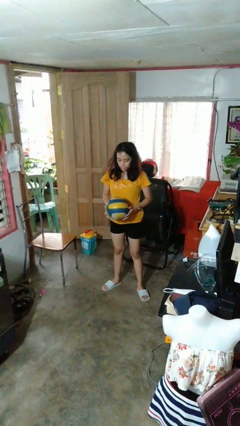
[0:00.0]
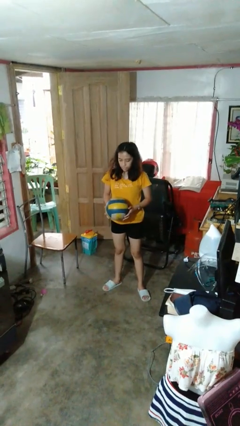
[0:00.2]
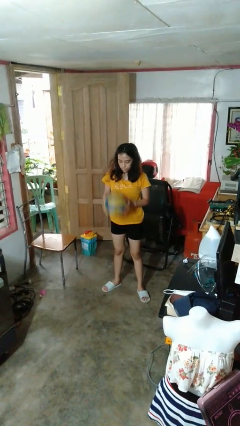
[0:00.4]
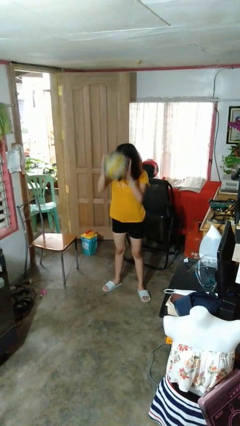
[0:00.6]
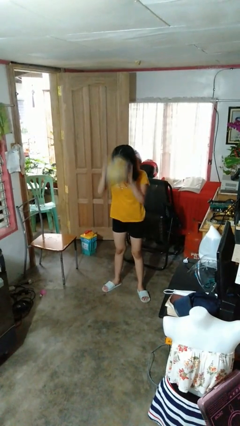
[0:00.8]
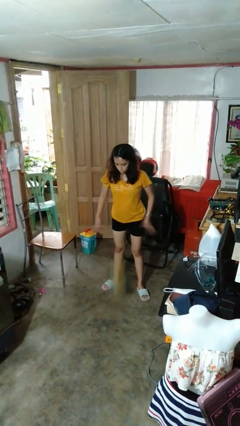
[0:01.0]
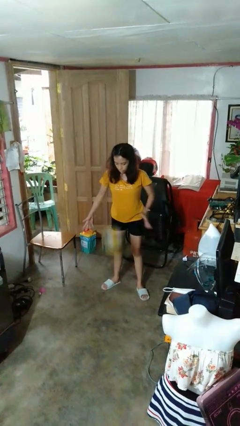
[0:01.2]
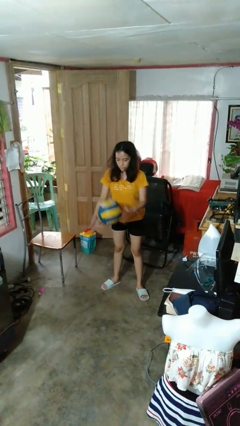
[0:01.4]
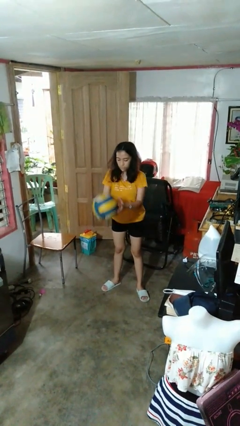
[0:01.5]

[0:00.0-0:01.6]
person bounces ball on floor

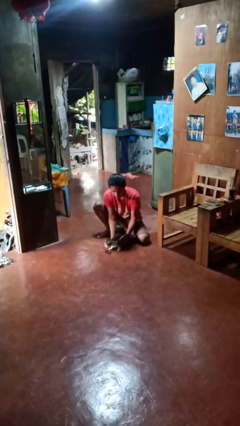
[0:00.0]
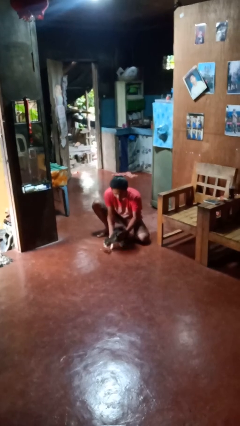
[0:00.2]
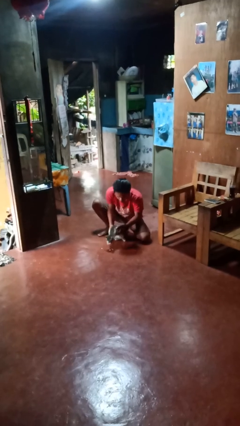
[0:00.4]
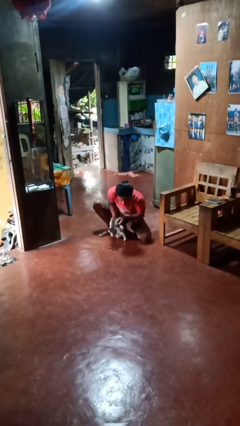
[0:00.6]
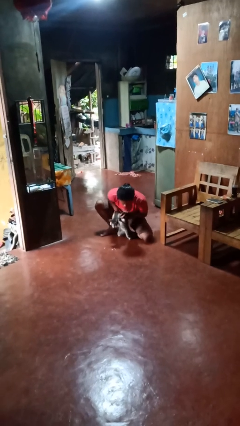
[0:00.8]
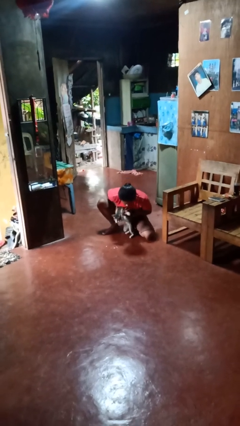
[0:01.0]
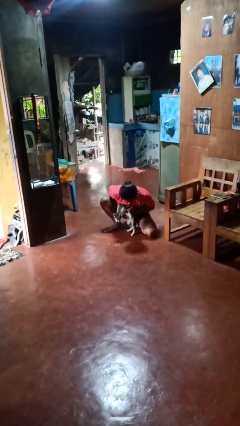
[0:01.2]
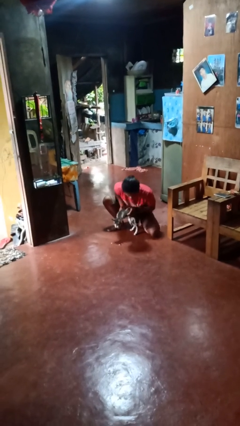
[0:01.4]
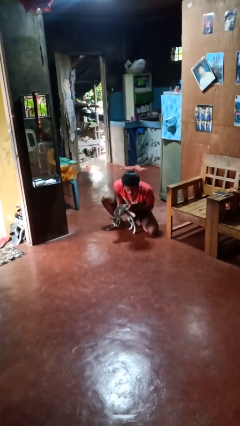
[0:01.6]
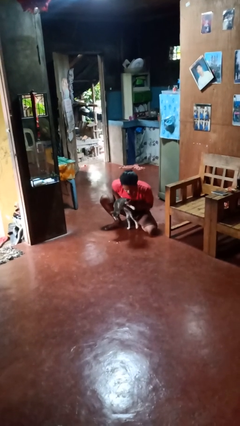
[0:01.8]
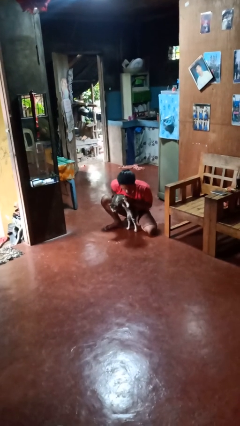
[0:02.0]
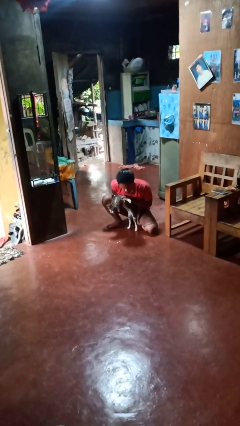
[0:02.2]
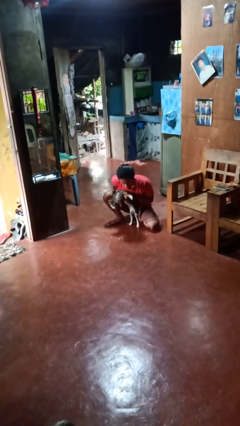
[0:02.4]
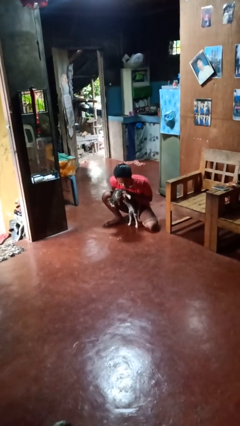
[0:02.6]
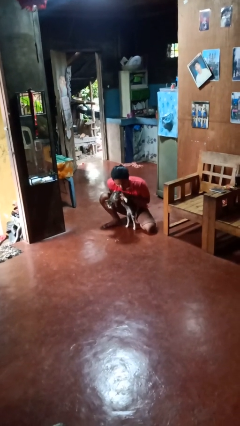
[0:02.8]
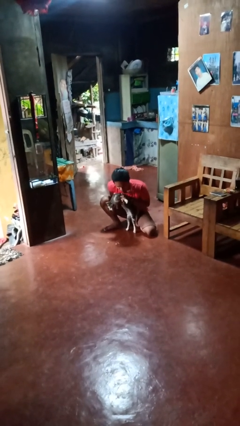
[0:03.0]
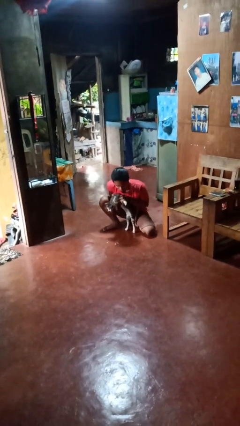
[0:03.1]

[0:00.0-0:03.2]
person hugs cat

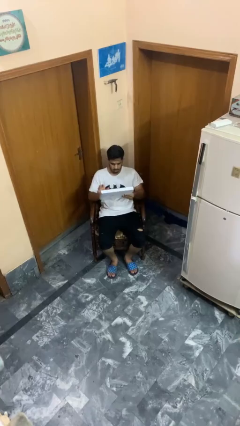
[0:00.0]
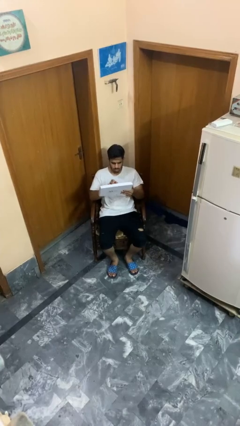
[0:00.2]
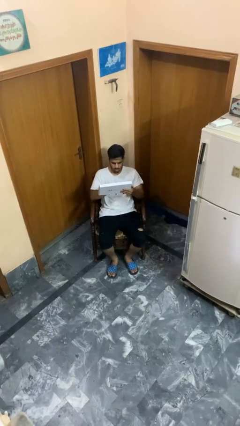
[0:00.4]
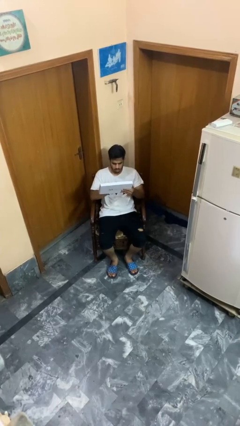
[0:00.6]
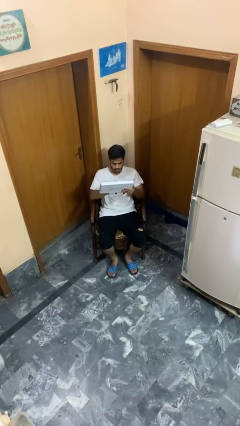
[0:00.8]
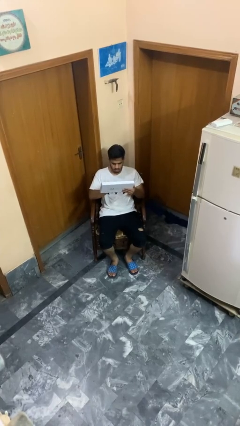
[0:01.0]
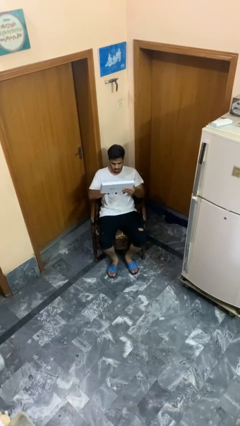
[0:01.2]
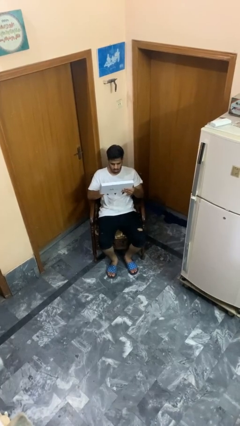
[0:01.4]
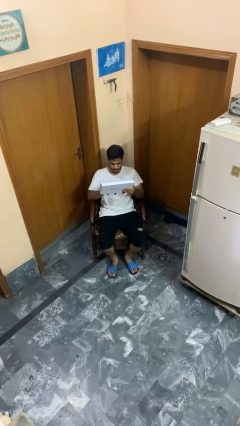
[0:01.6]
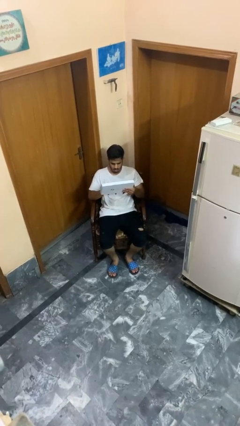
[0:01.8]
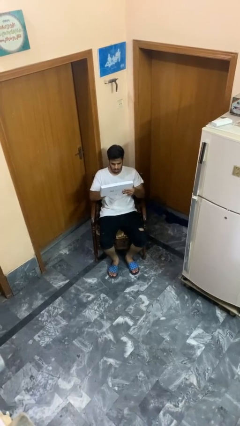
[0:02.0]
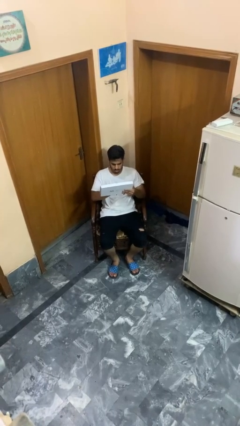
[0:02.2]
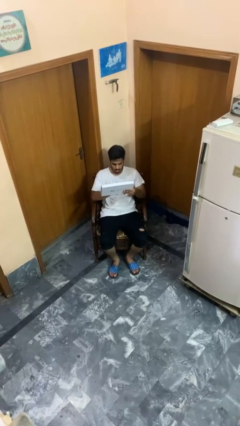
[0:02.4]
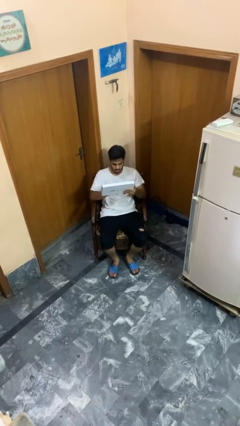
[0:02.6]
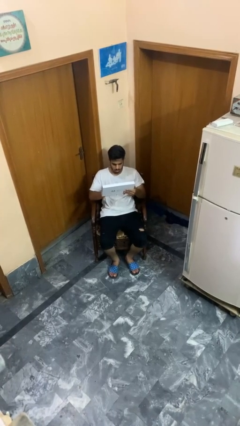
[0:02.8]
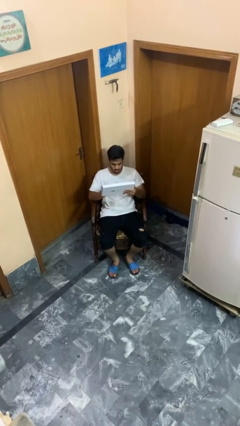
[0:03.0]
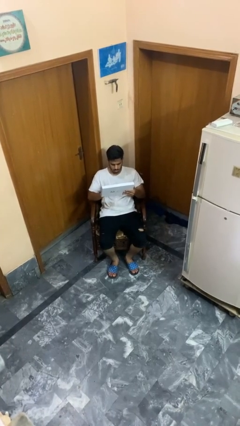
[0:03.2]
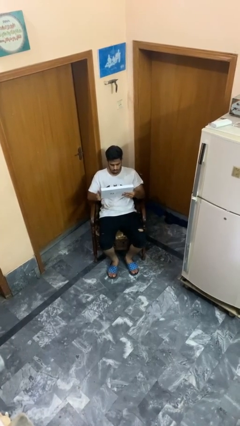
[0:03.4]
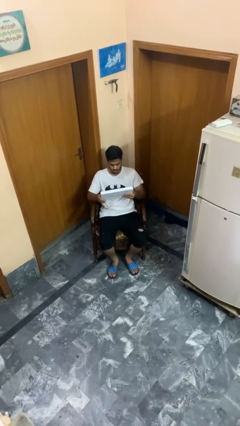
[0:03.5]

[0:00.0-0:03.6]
person interacts with tablet

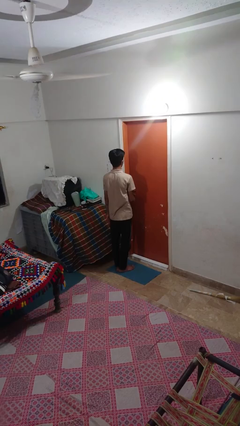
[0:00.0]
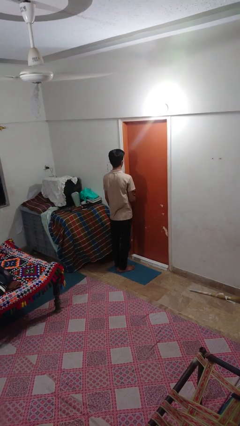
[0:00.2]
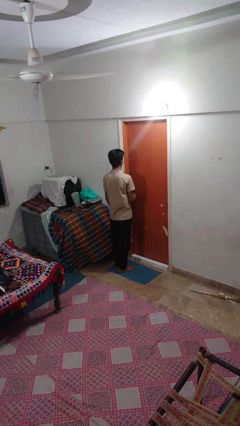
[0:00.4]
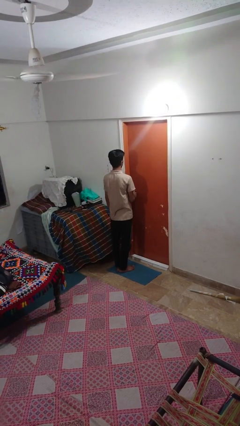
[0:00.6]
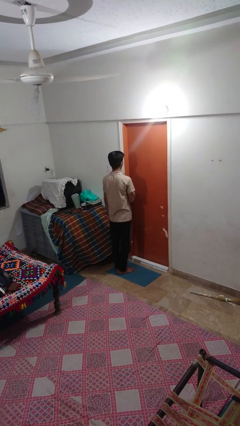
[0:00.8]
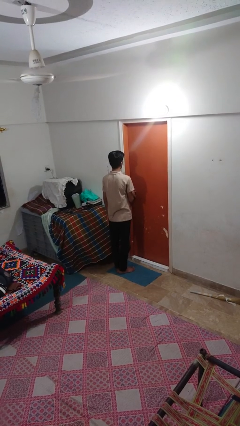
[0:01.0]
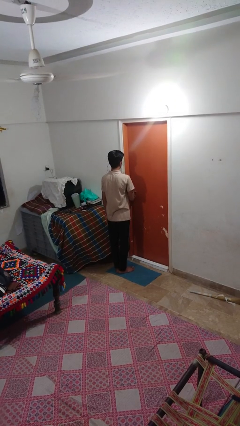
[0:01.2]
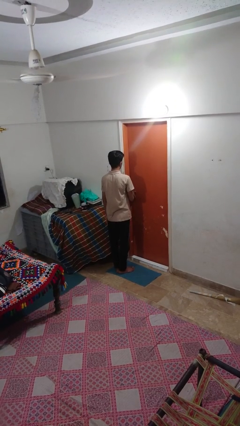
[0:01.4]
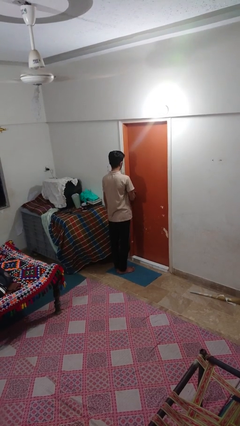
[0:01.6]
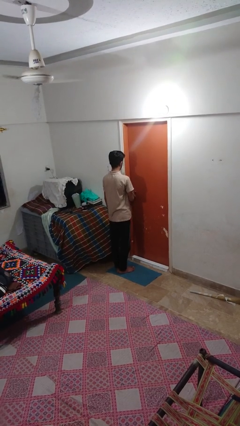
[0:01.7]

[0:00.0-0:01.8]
person locks door with keys

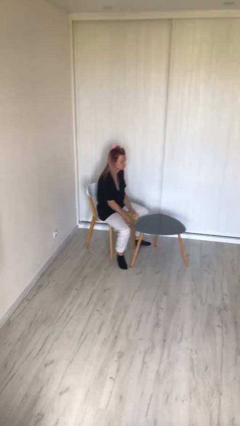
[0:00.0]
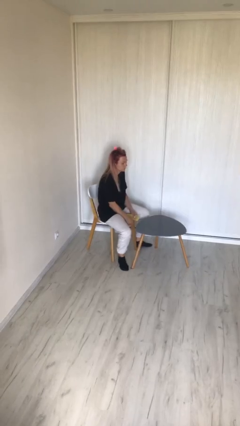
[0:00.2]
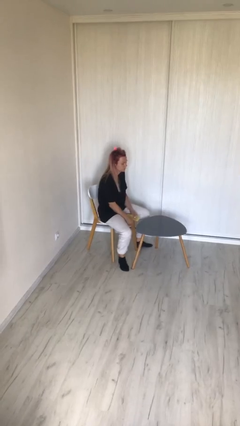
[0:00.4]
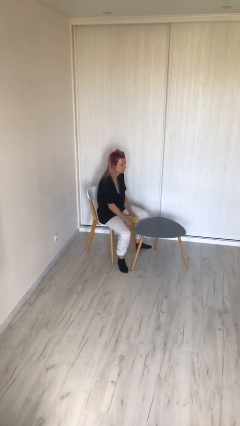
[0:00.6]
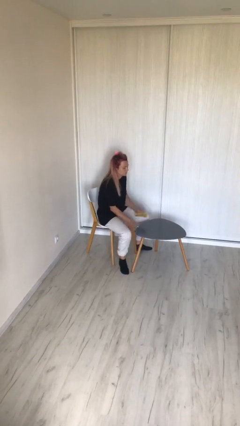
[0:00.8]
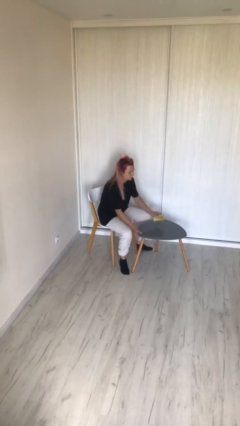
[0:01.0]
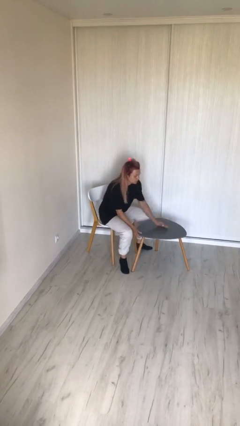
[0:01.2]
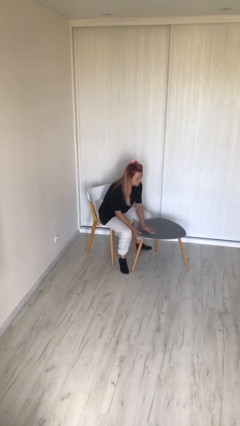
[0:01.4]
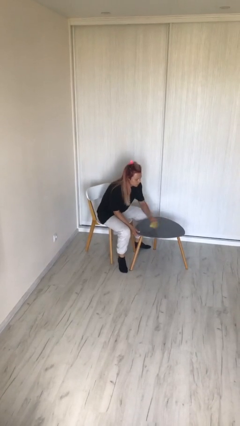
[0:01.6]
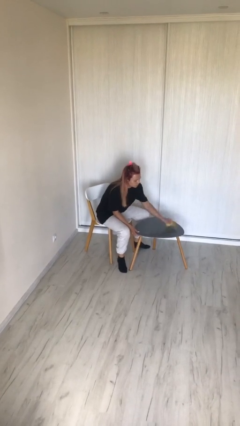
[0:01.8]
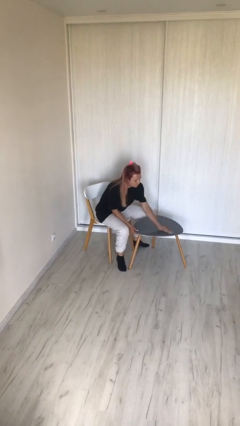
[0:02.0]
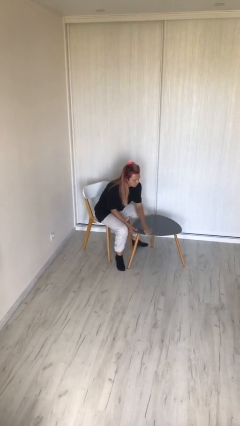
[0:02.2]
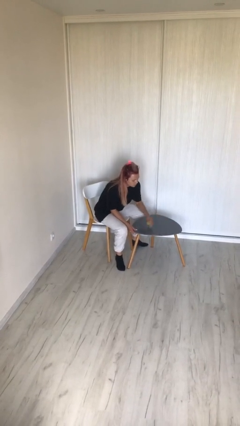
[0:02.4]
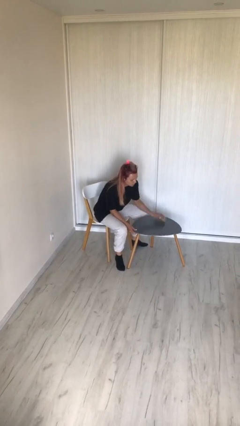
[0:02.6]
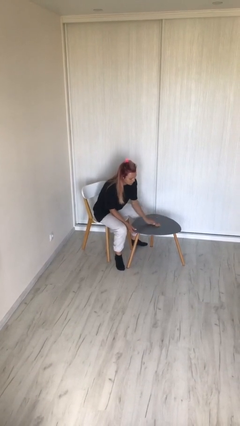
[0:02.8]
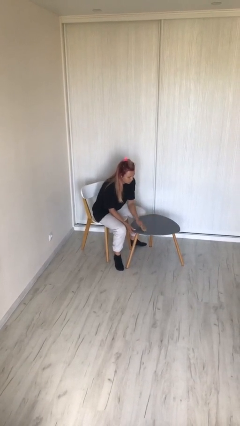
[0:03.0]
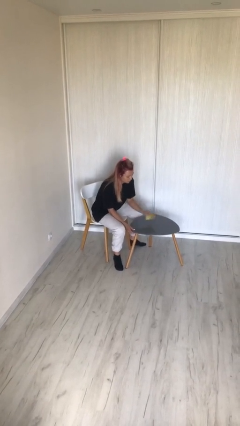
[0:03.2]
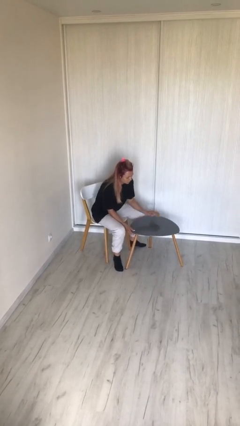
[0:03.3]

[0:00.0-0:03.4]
person cleans table with rag

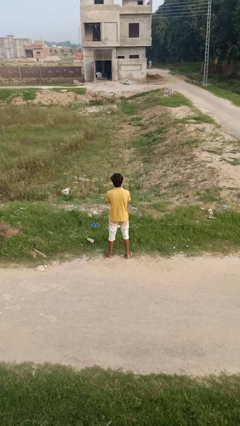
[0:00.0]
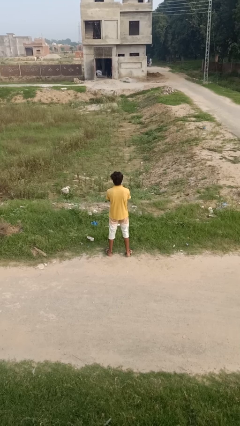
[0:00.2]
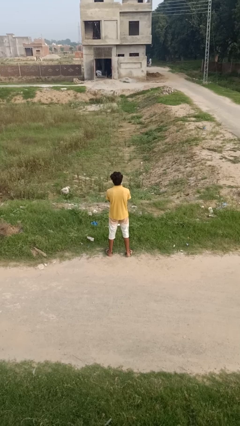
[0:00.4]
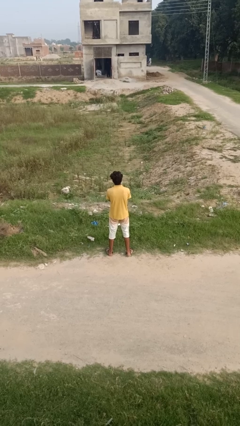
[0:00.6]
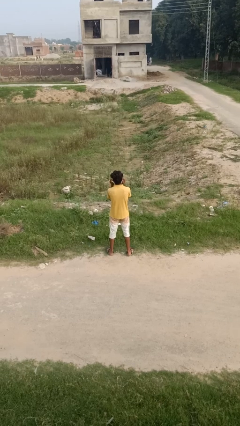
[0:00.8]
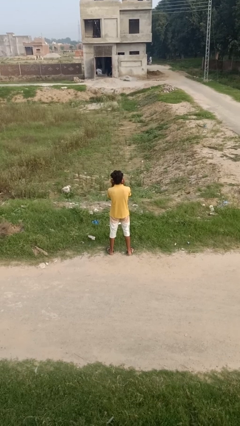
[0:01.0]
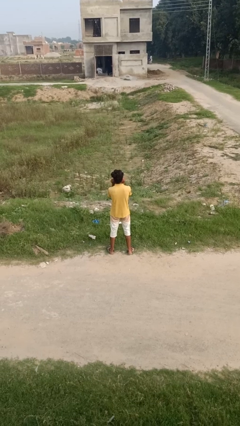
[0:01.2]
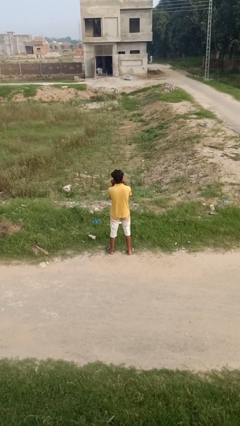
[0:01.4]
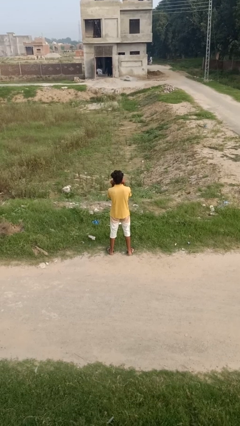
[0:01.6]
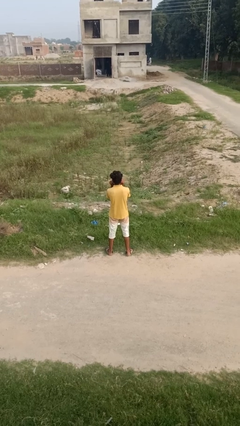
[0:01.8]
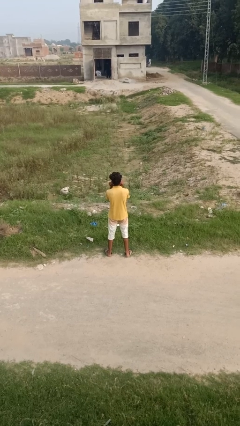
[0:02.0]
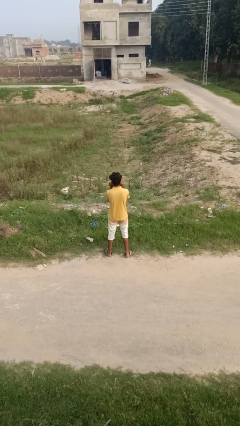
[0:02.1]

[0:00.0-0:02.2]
person touches earlobe

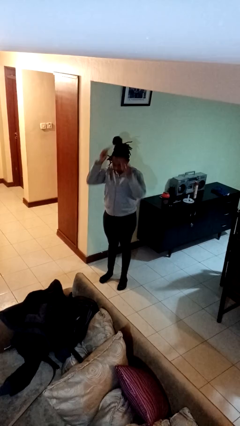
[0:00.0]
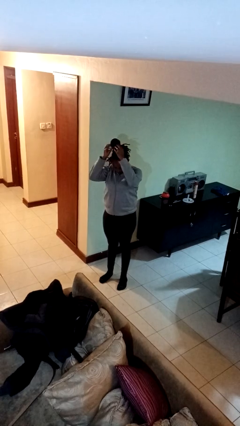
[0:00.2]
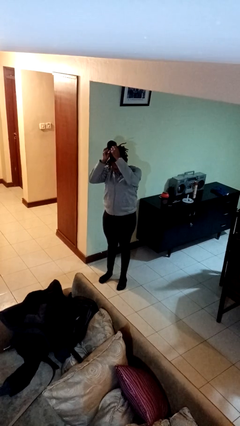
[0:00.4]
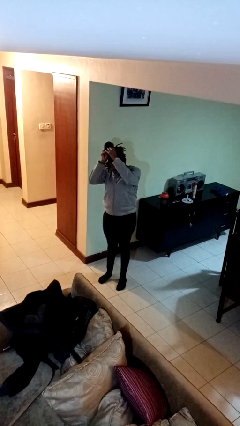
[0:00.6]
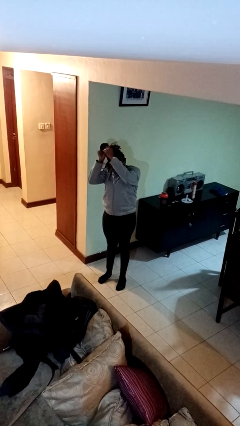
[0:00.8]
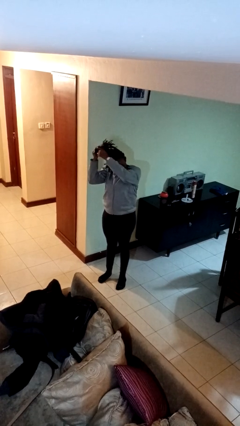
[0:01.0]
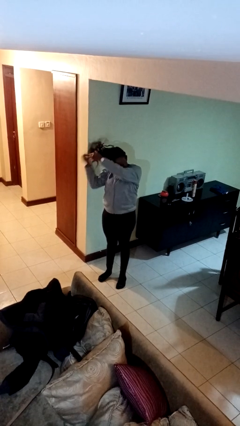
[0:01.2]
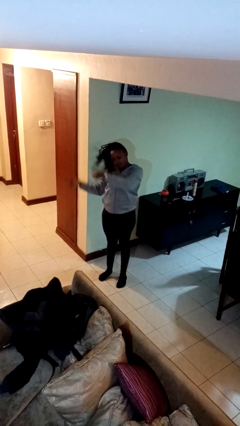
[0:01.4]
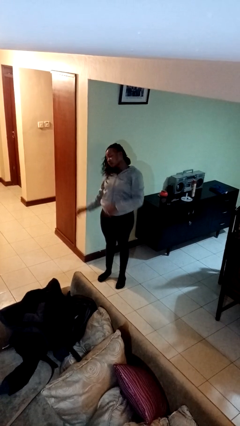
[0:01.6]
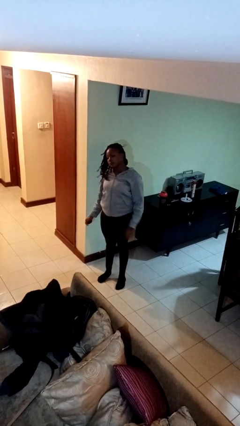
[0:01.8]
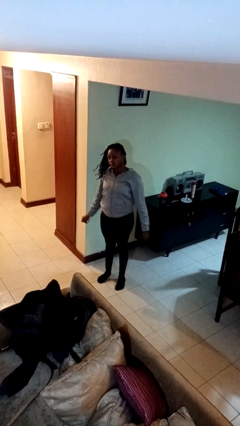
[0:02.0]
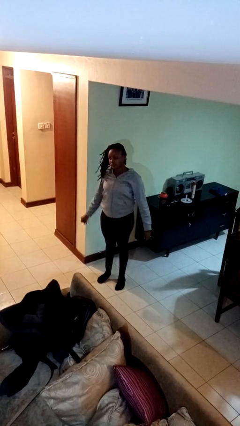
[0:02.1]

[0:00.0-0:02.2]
person takes off hairtie
